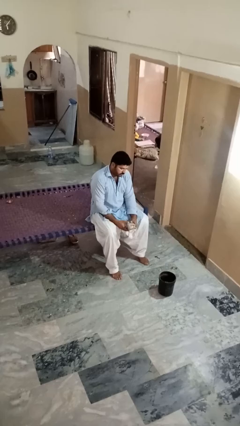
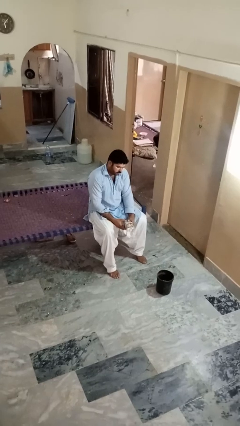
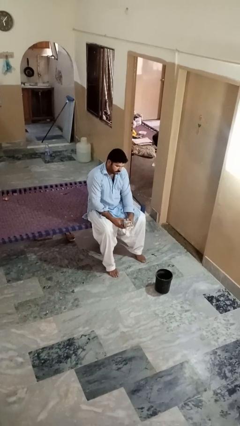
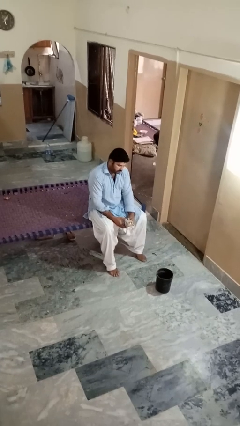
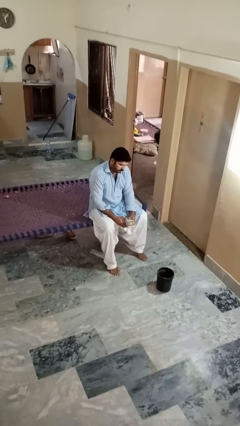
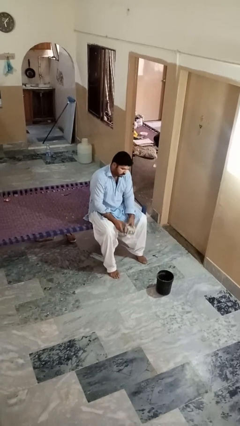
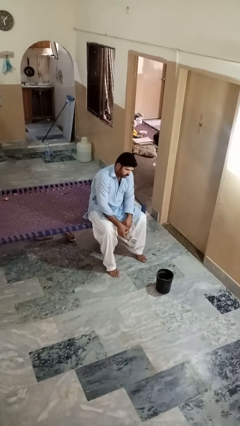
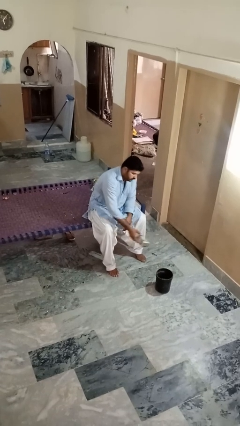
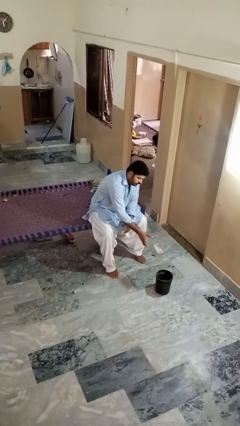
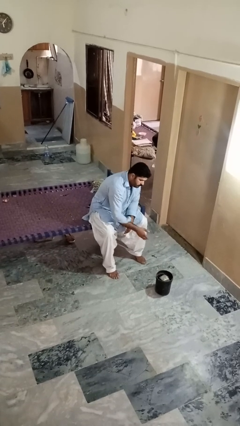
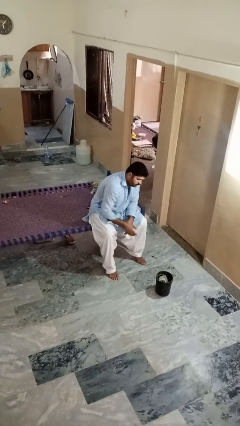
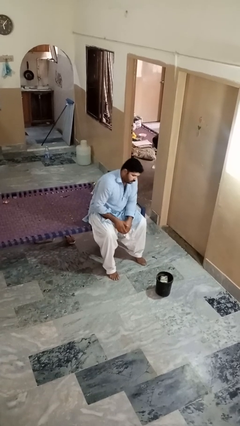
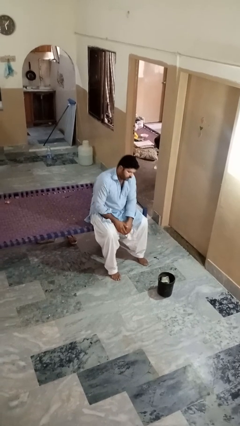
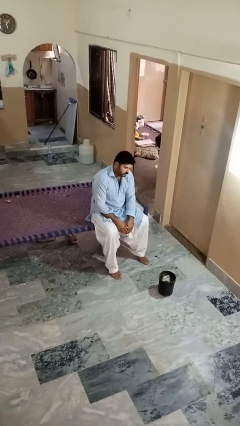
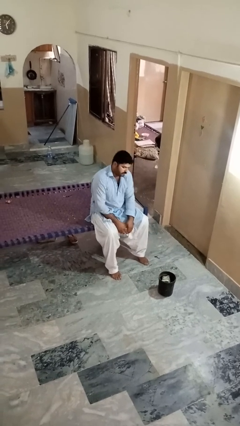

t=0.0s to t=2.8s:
person puts object into basket

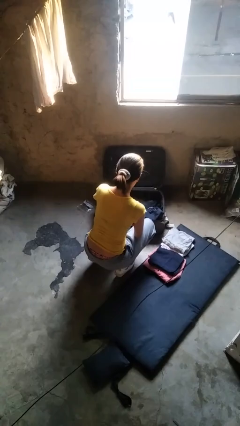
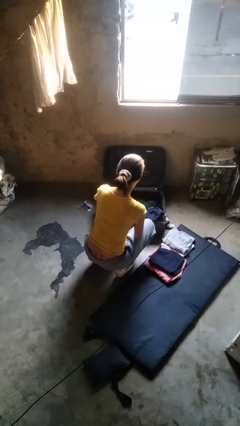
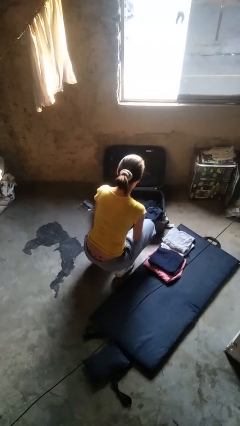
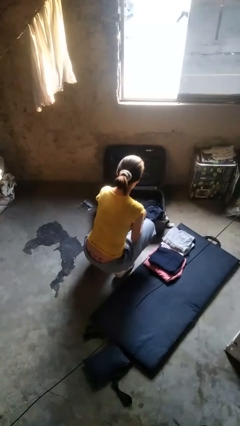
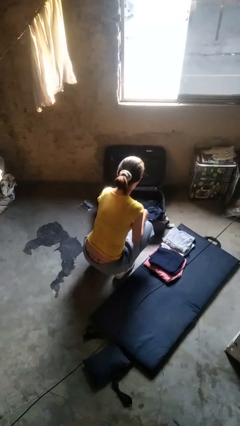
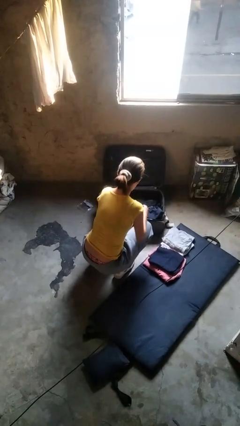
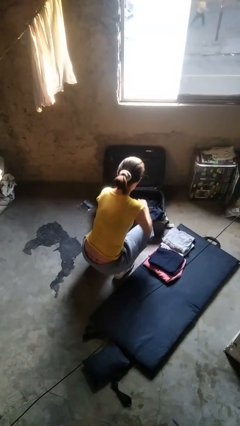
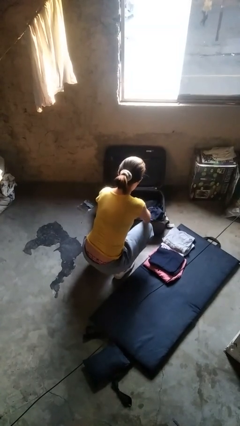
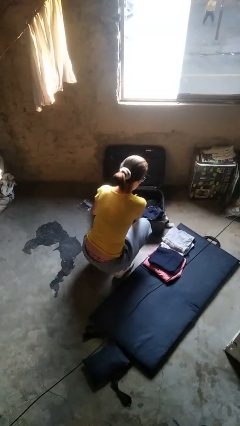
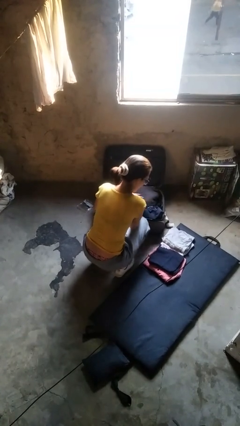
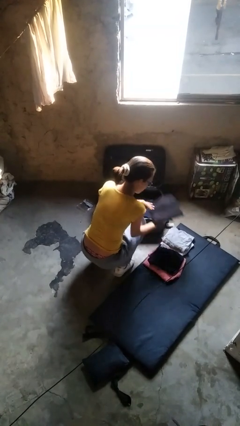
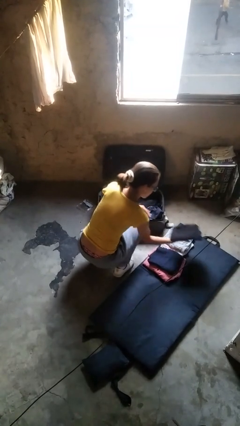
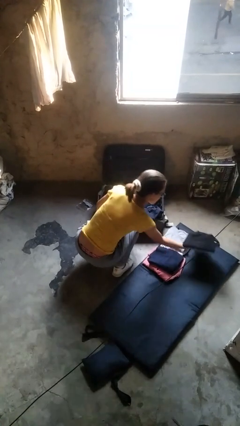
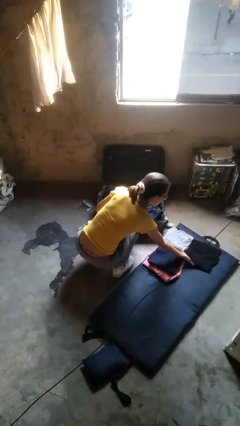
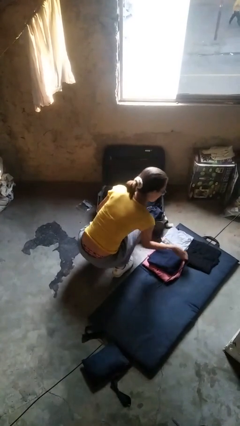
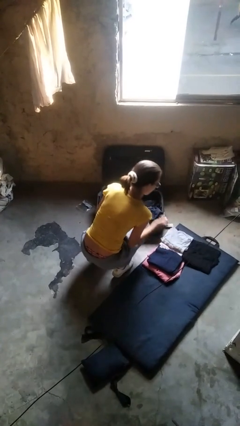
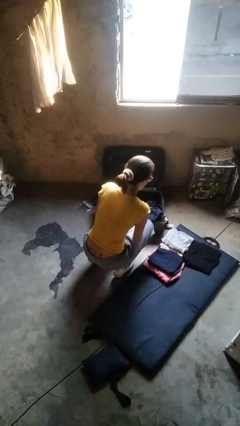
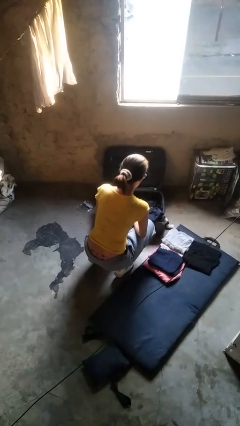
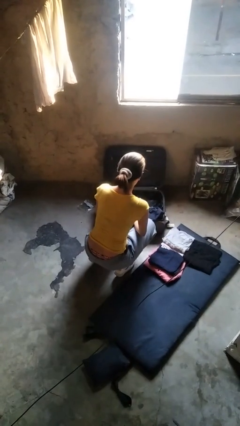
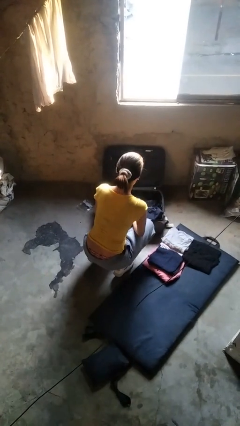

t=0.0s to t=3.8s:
person unloads clothes from suitcase

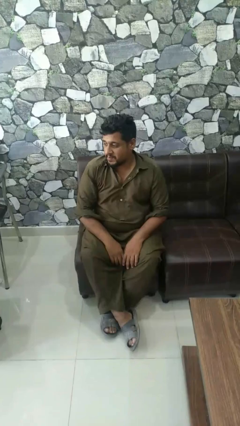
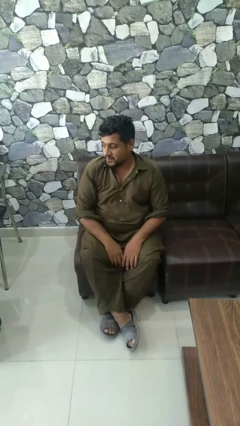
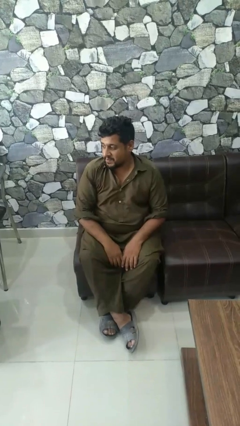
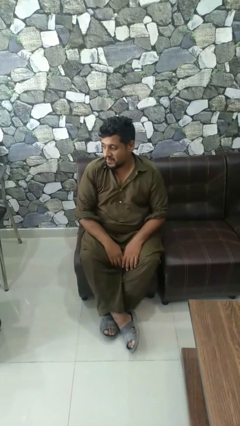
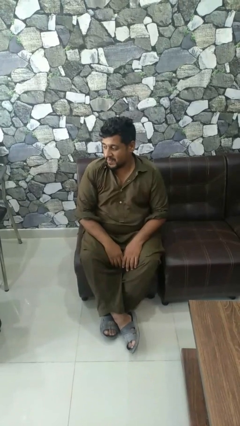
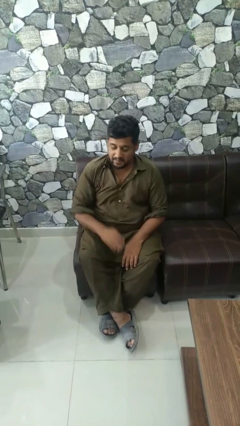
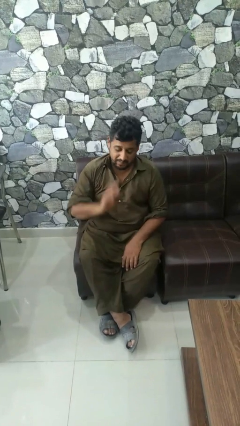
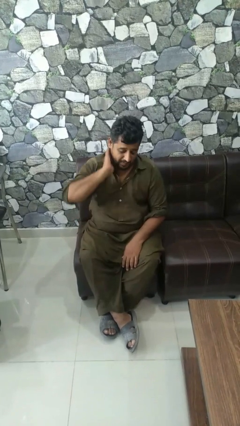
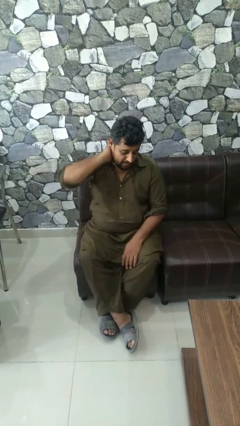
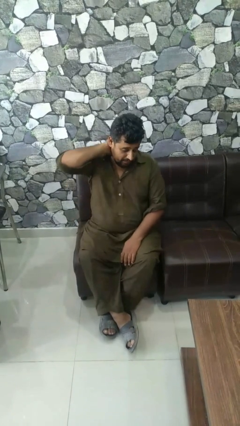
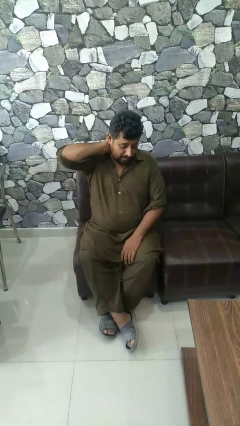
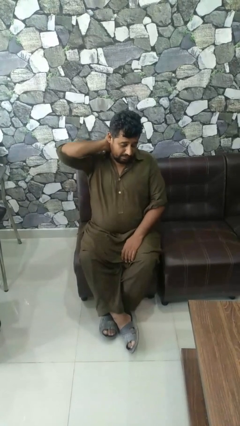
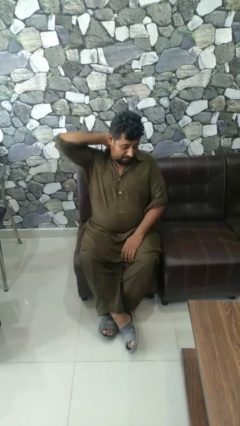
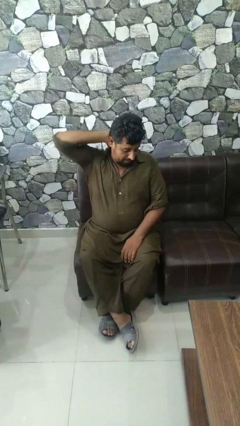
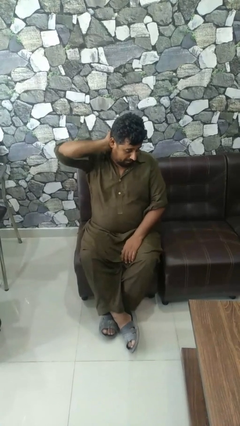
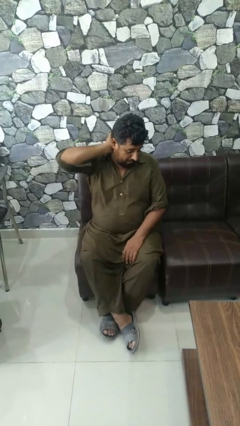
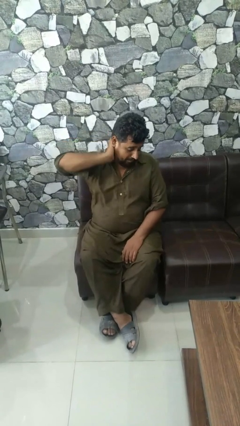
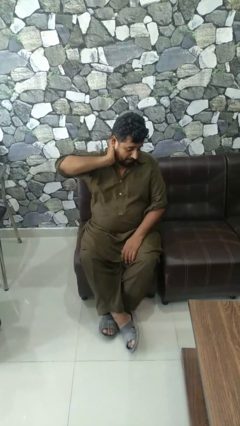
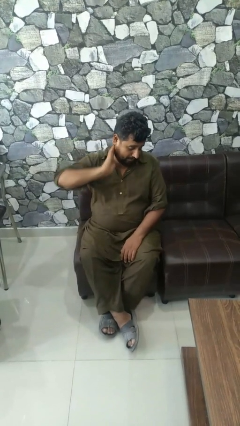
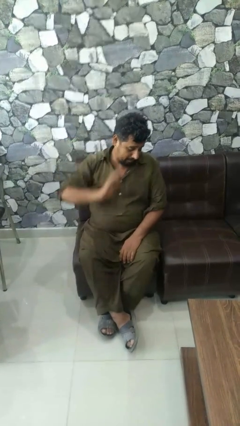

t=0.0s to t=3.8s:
person rubs neck

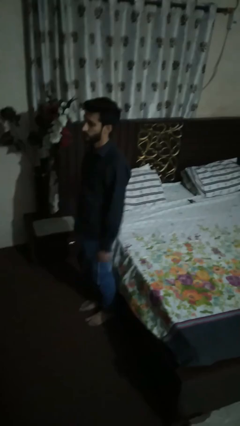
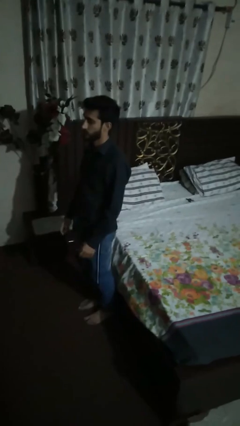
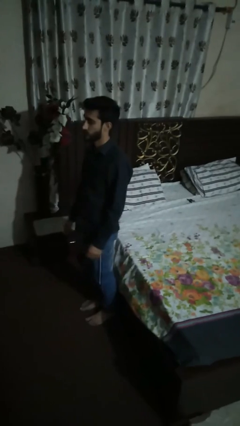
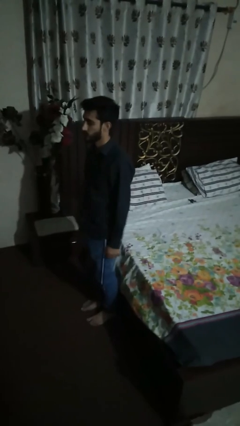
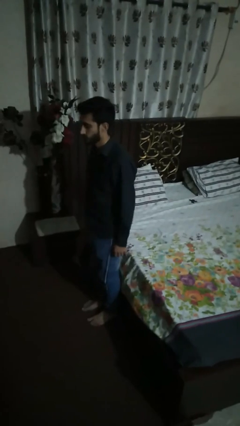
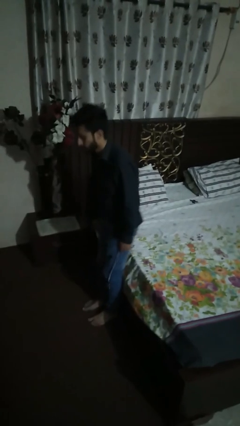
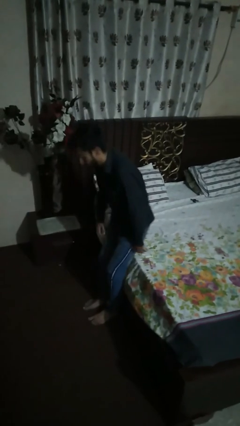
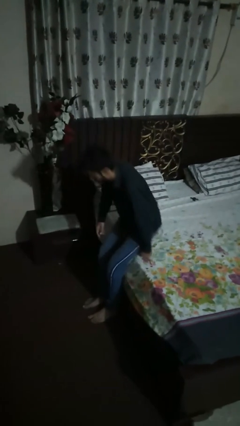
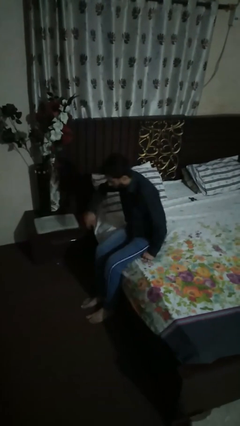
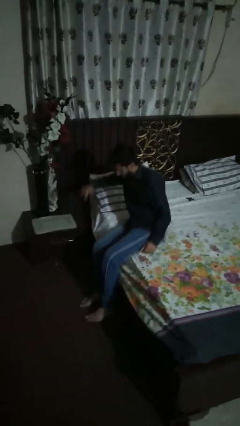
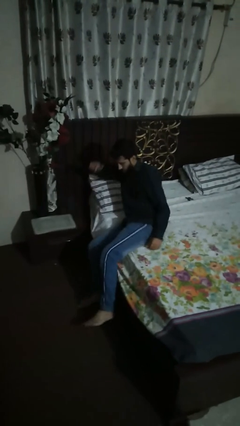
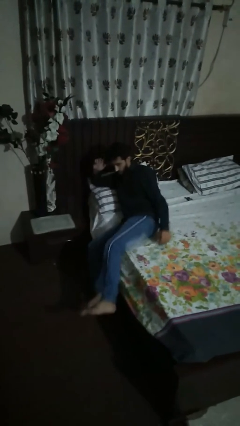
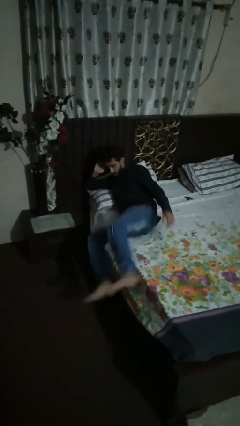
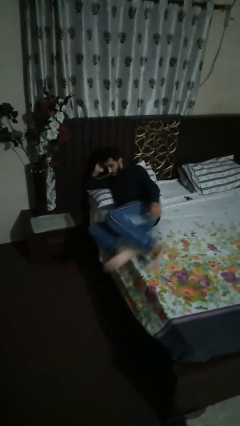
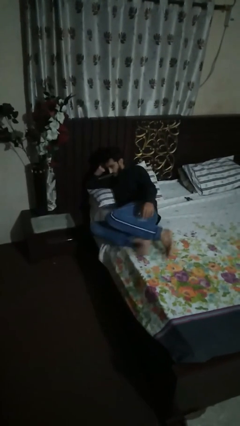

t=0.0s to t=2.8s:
person lies down on bed

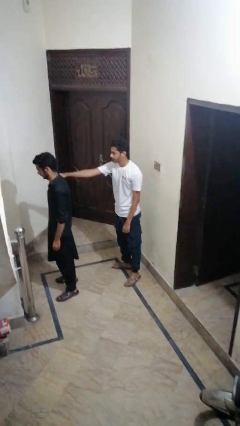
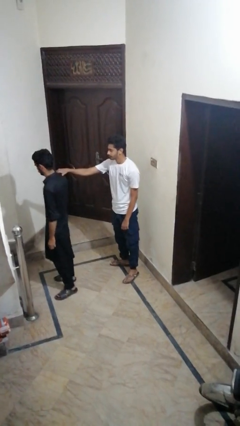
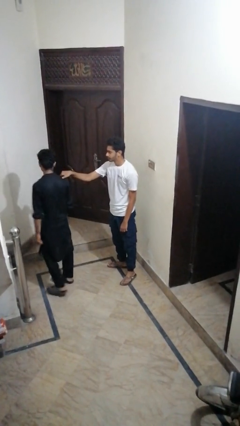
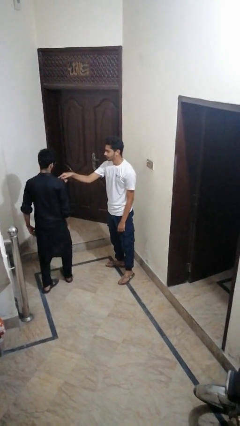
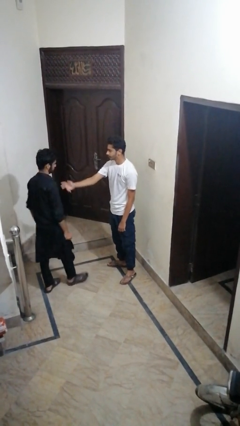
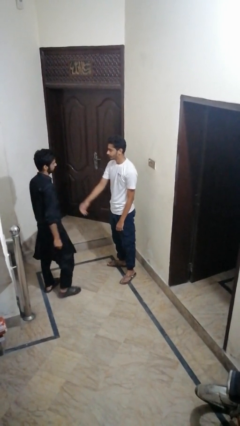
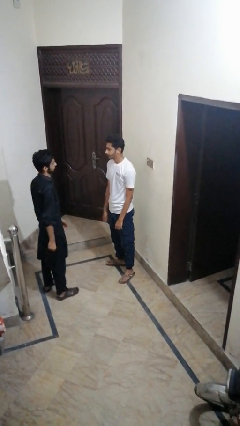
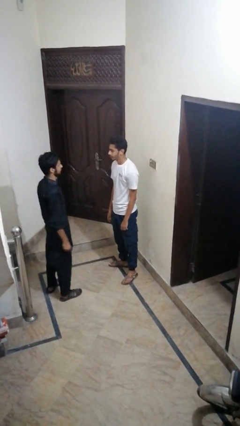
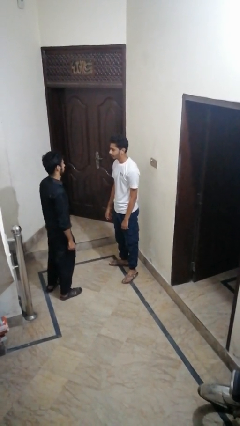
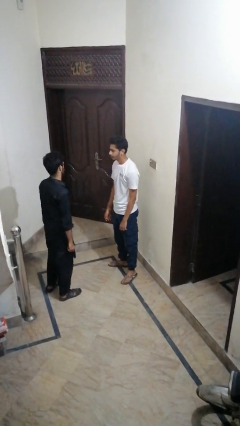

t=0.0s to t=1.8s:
person spins person around

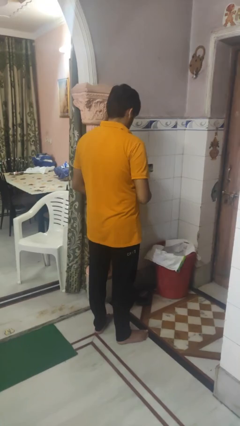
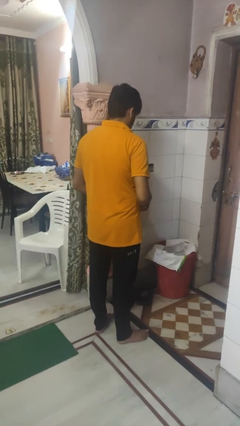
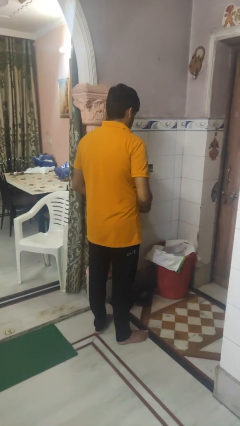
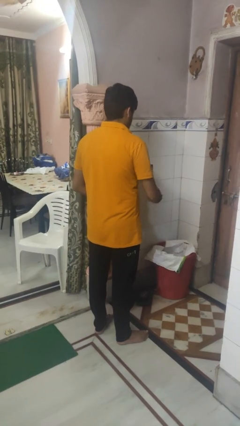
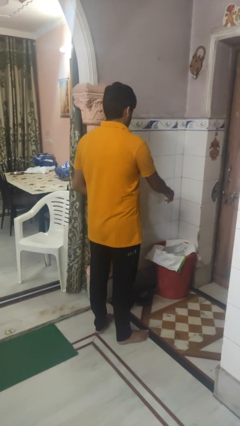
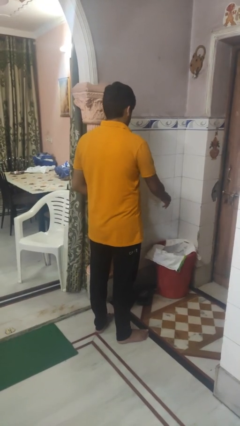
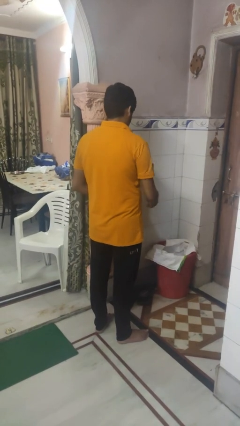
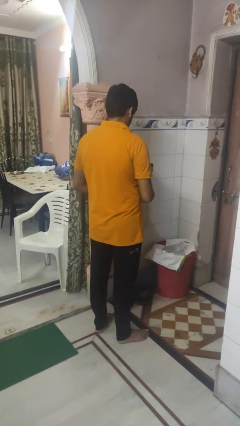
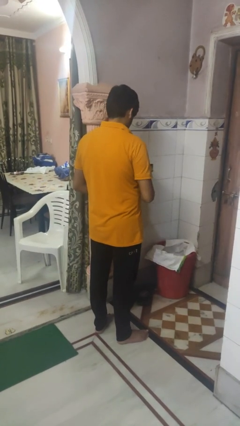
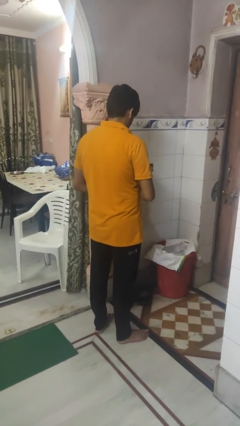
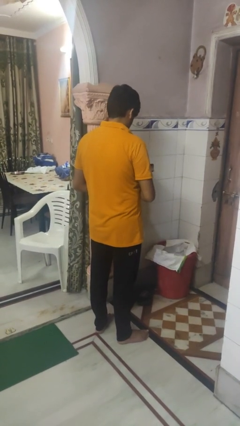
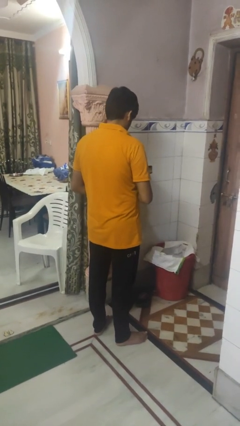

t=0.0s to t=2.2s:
person discards trash
